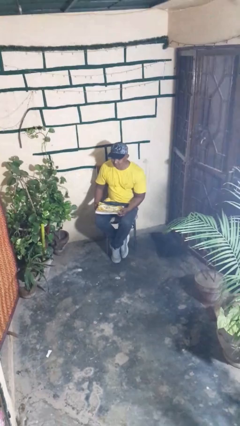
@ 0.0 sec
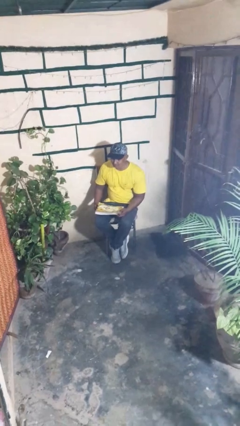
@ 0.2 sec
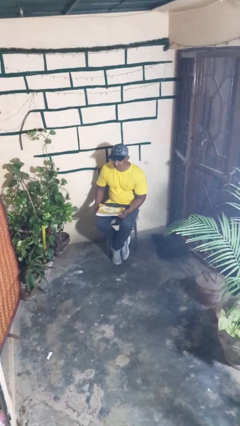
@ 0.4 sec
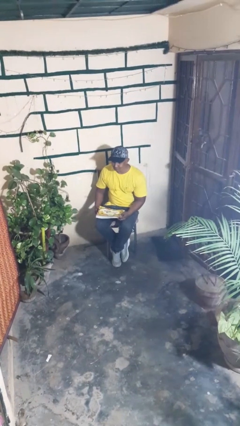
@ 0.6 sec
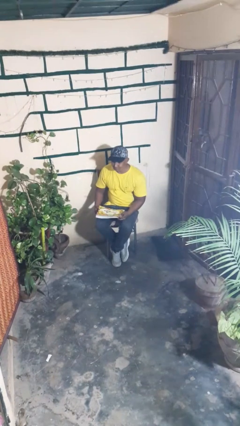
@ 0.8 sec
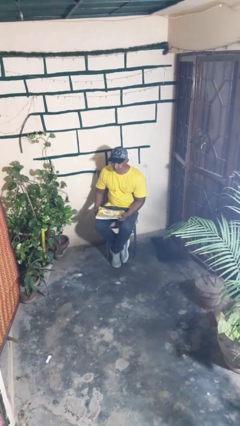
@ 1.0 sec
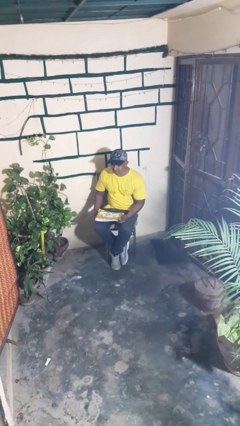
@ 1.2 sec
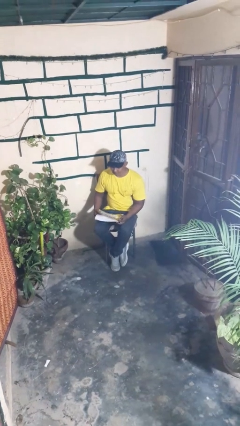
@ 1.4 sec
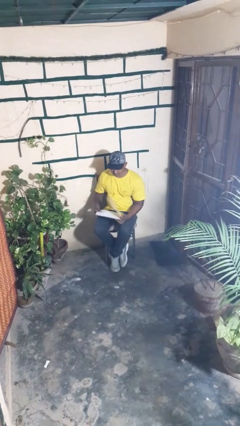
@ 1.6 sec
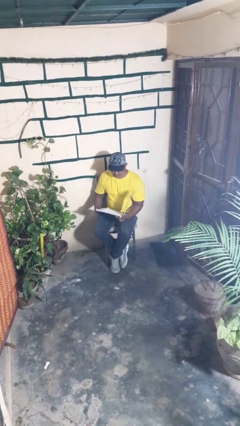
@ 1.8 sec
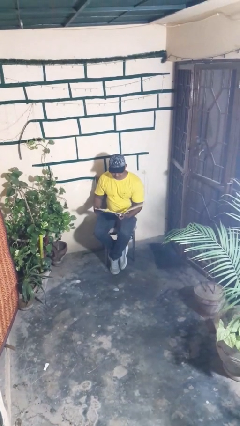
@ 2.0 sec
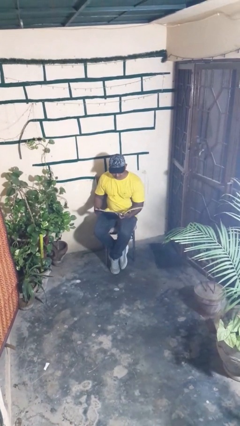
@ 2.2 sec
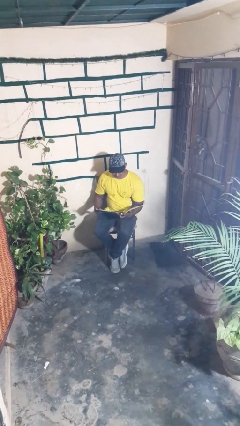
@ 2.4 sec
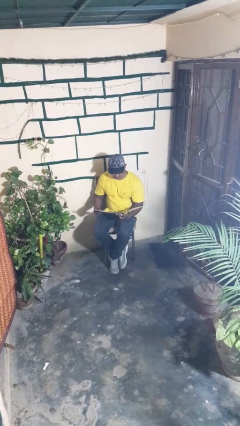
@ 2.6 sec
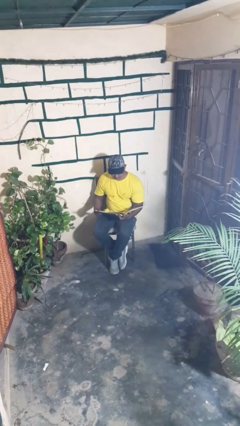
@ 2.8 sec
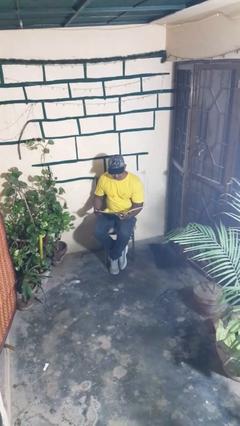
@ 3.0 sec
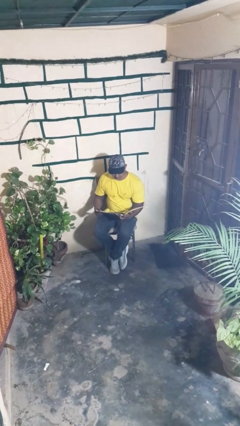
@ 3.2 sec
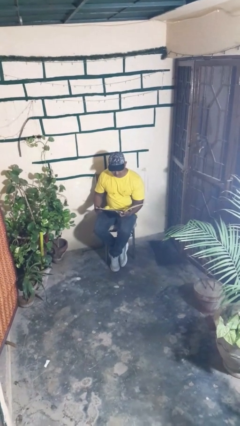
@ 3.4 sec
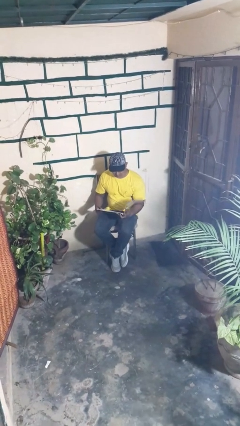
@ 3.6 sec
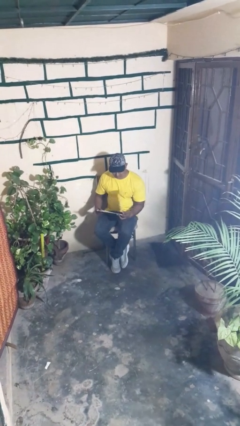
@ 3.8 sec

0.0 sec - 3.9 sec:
person reads magazine

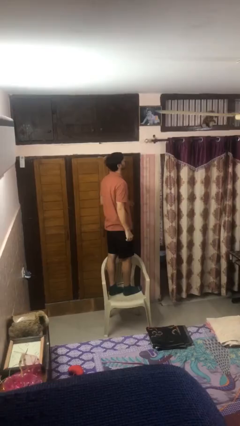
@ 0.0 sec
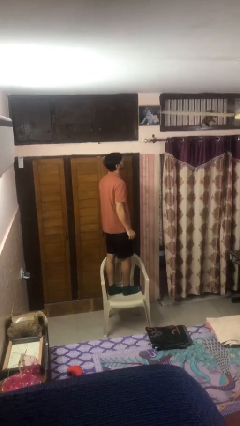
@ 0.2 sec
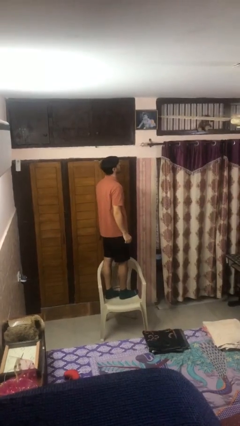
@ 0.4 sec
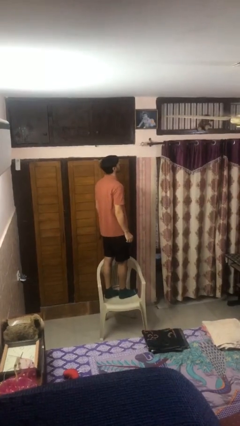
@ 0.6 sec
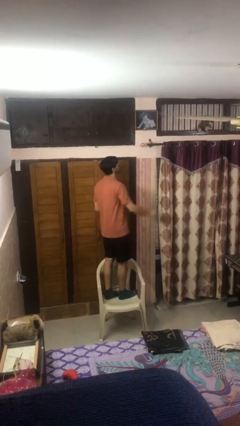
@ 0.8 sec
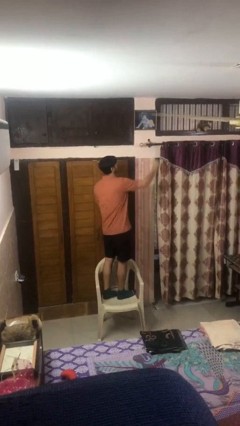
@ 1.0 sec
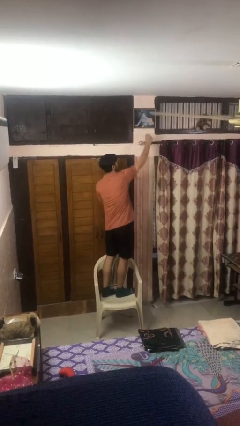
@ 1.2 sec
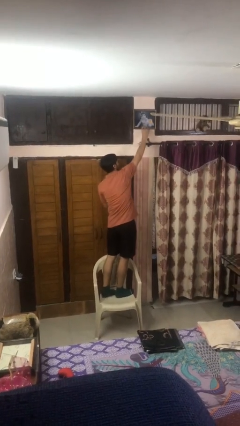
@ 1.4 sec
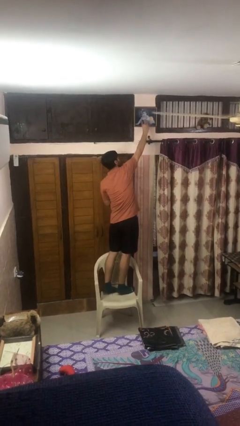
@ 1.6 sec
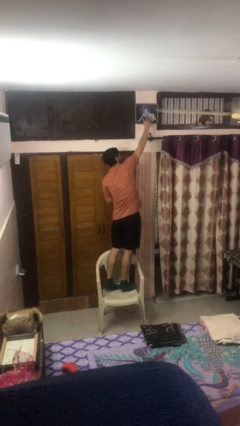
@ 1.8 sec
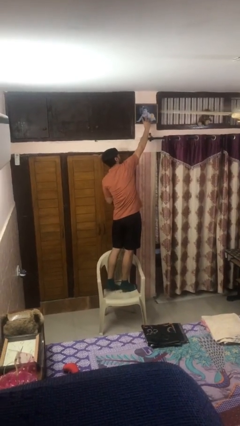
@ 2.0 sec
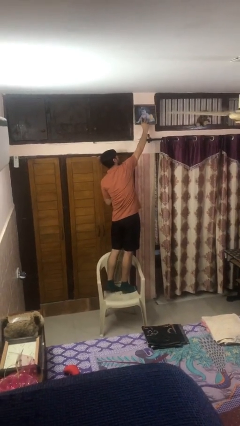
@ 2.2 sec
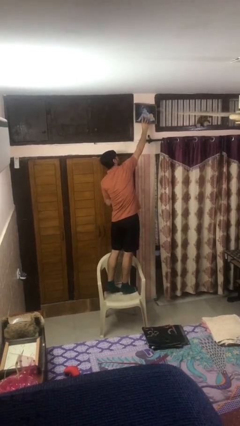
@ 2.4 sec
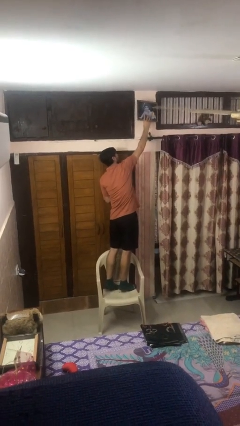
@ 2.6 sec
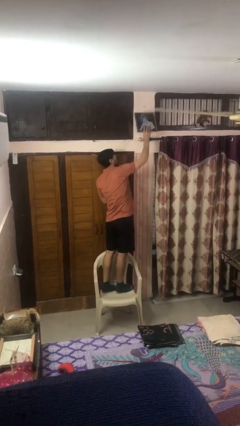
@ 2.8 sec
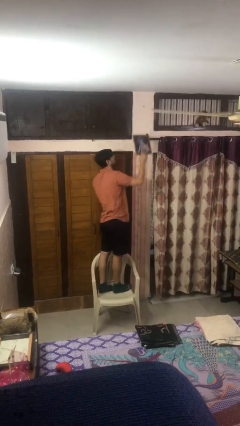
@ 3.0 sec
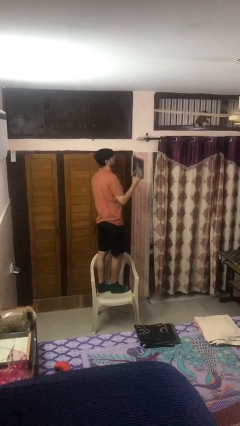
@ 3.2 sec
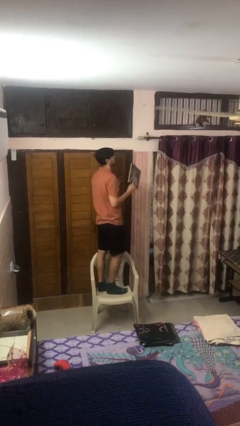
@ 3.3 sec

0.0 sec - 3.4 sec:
person takes down picture frame

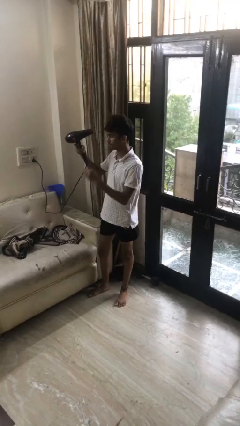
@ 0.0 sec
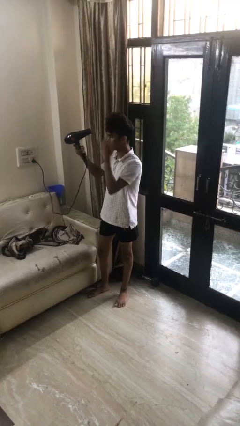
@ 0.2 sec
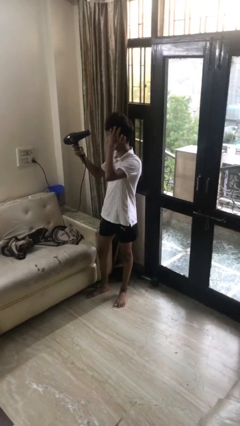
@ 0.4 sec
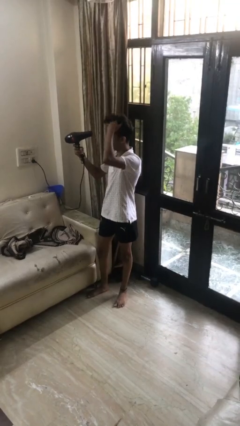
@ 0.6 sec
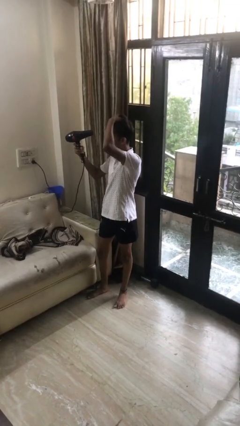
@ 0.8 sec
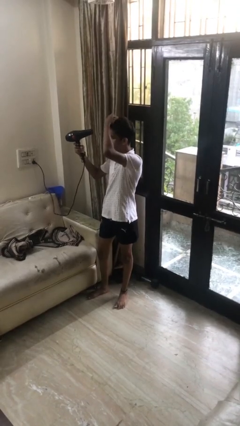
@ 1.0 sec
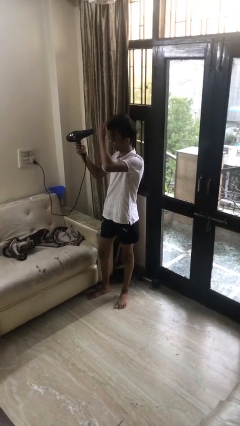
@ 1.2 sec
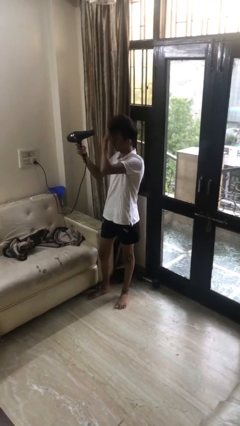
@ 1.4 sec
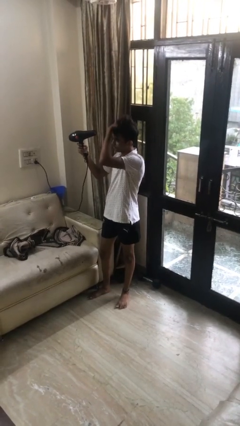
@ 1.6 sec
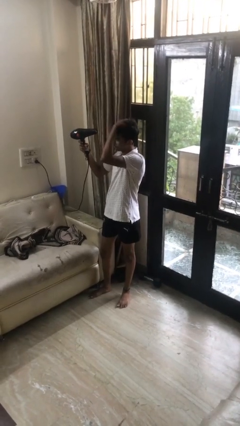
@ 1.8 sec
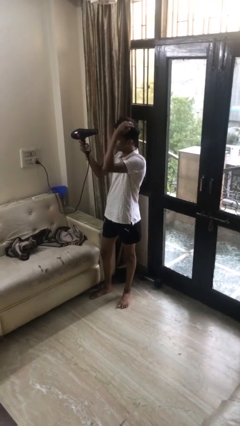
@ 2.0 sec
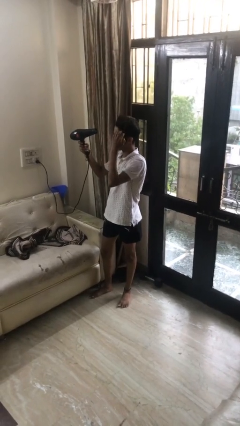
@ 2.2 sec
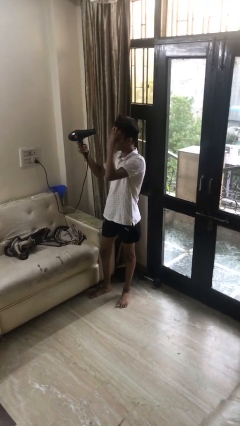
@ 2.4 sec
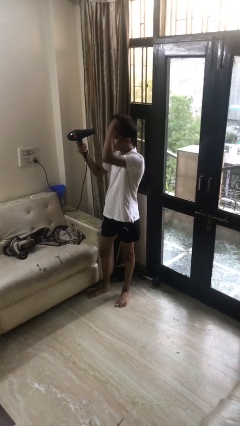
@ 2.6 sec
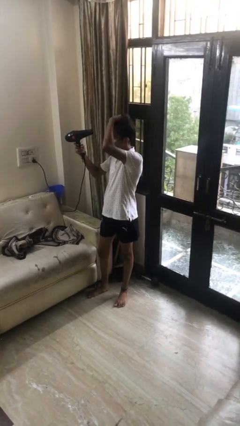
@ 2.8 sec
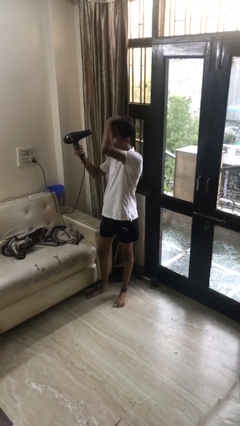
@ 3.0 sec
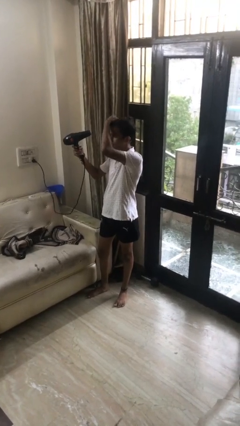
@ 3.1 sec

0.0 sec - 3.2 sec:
person dries hair with hairdryer

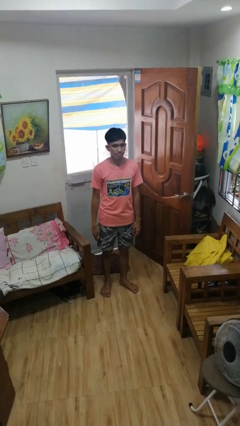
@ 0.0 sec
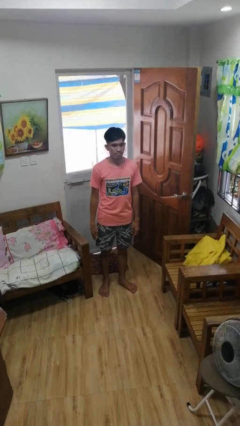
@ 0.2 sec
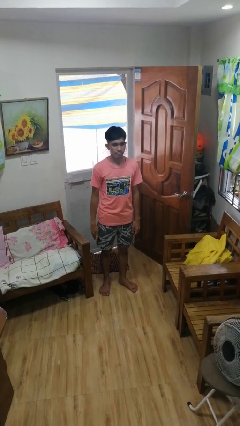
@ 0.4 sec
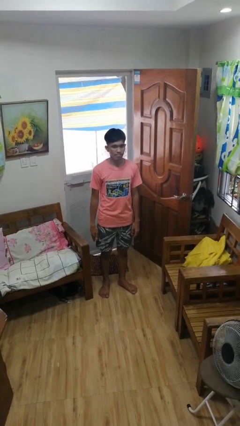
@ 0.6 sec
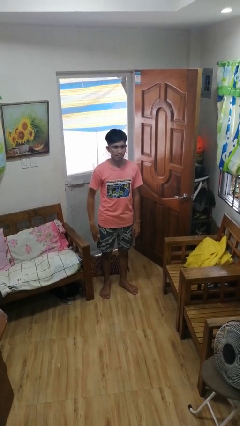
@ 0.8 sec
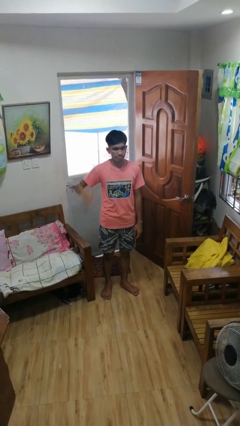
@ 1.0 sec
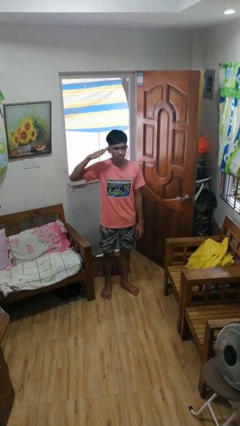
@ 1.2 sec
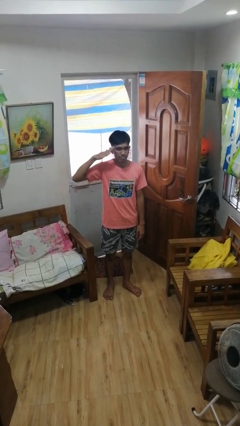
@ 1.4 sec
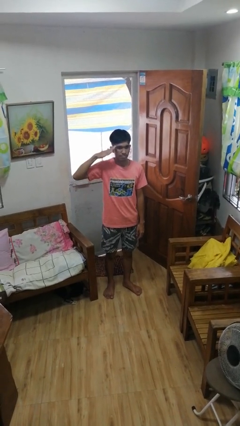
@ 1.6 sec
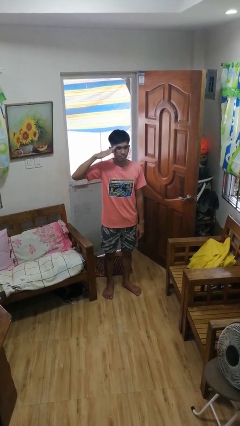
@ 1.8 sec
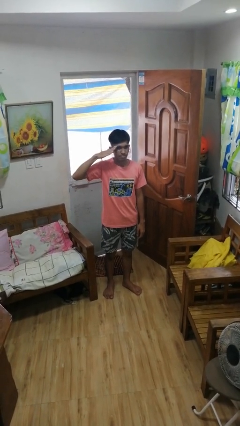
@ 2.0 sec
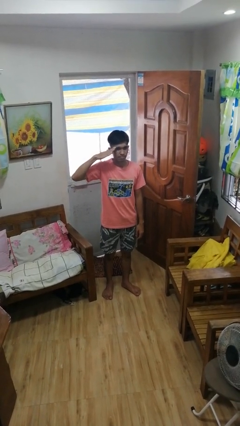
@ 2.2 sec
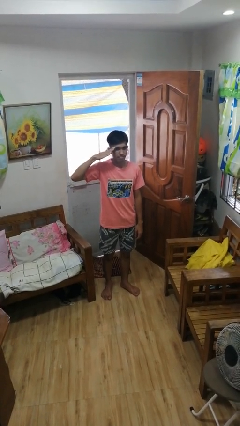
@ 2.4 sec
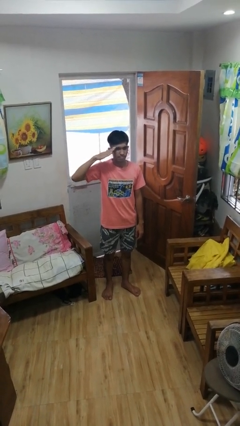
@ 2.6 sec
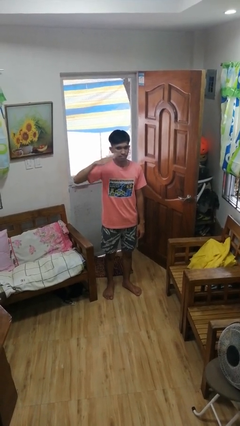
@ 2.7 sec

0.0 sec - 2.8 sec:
person salutes

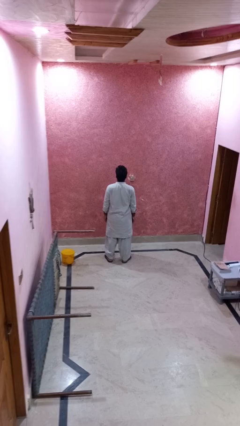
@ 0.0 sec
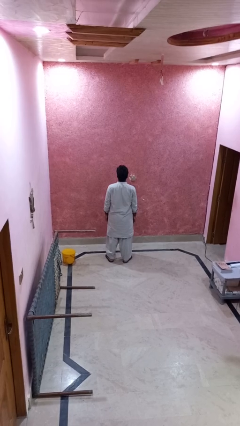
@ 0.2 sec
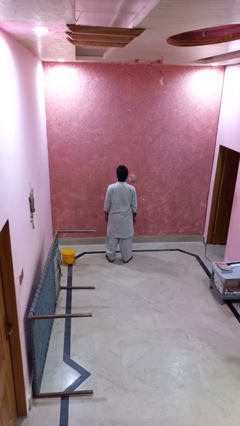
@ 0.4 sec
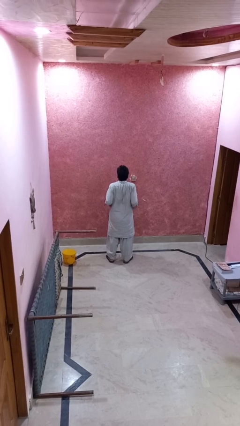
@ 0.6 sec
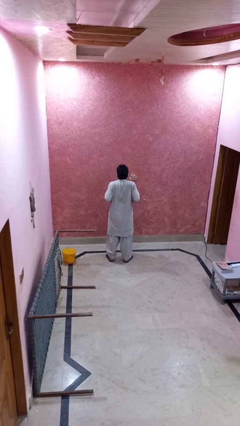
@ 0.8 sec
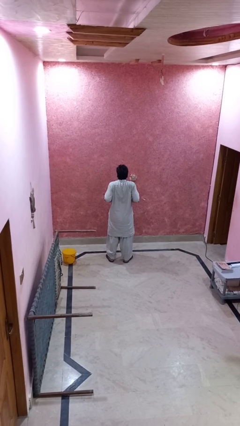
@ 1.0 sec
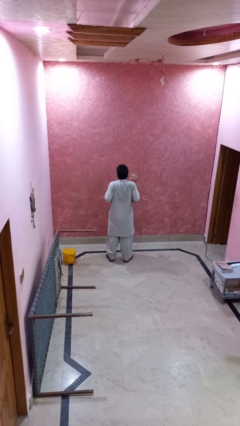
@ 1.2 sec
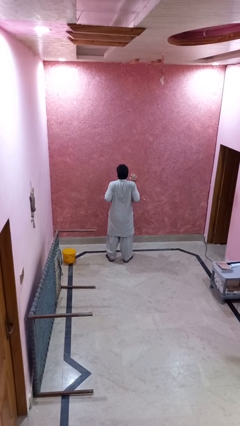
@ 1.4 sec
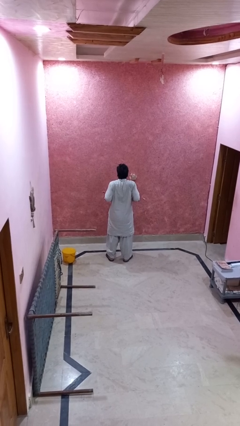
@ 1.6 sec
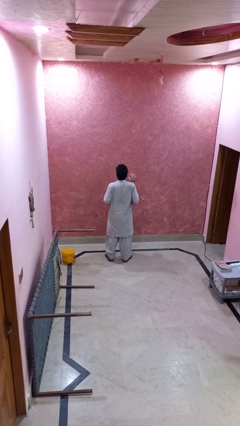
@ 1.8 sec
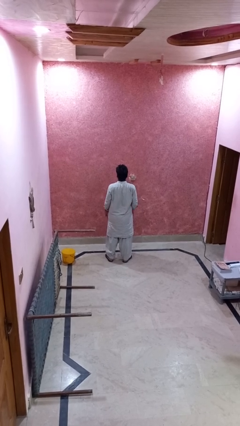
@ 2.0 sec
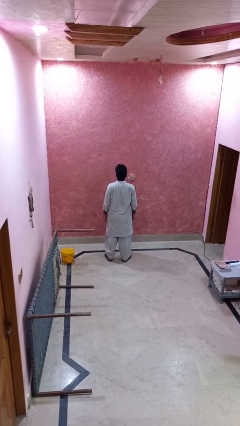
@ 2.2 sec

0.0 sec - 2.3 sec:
person shrugs

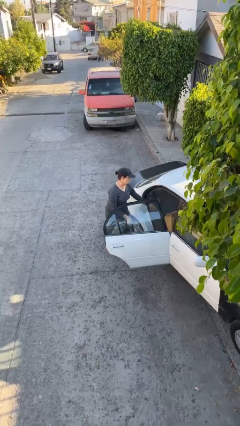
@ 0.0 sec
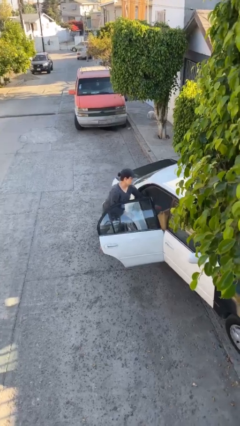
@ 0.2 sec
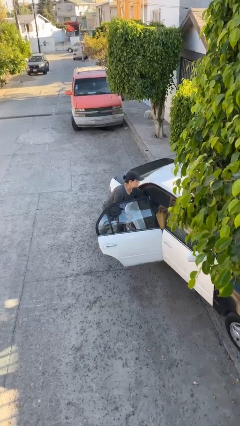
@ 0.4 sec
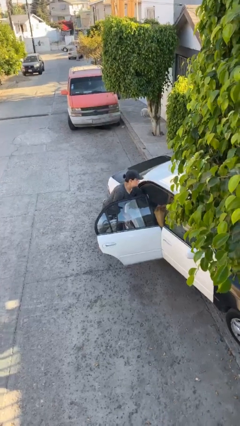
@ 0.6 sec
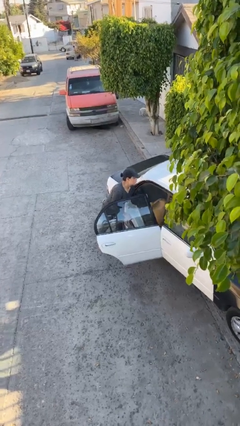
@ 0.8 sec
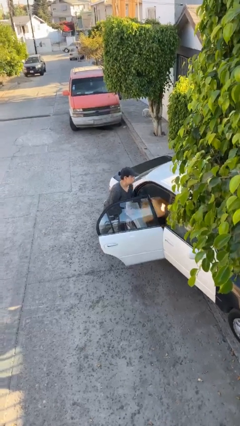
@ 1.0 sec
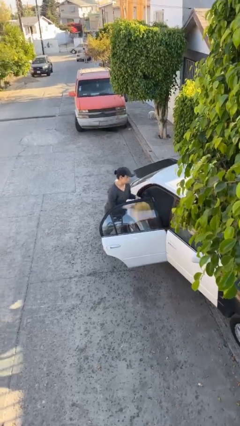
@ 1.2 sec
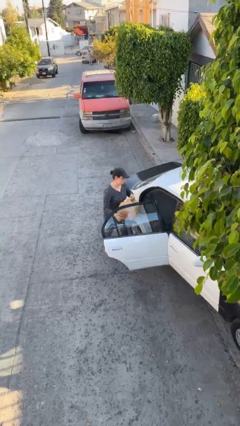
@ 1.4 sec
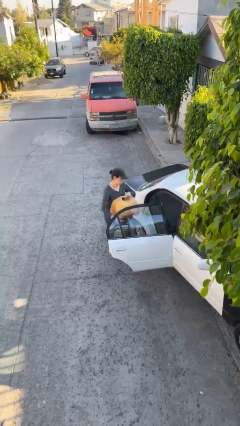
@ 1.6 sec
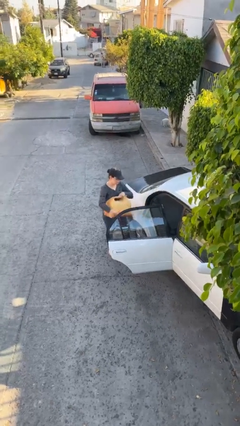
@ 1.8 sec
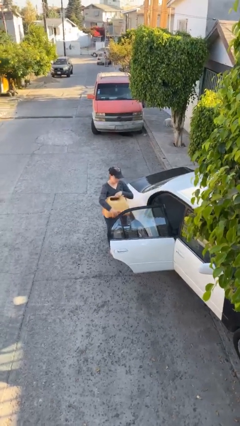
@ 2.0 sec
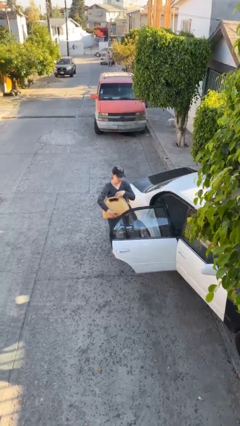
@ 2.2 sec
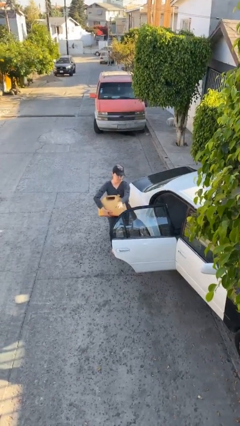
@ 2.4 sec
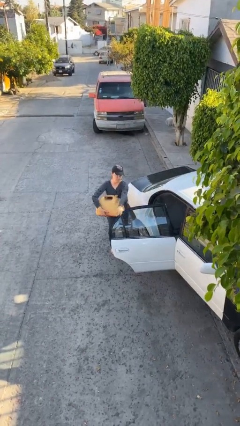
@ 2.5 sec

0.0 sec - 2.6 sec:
person unloads car
